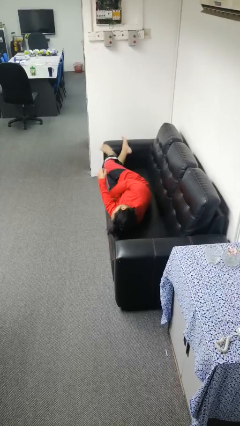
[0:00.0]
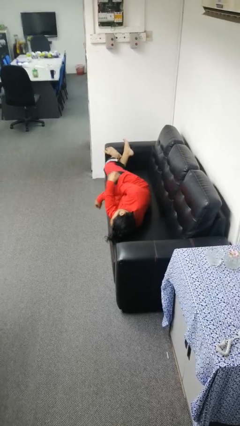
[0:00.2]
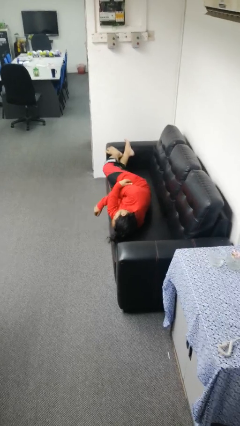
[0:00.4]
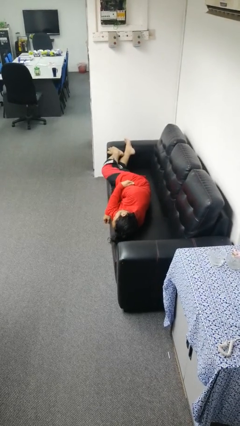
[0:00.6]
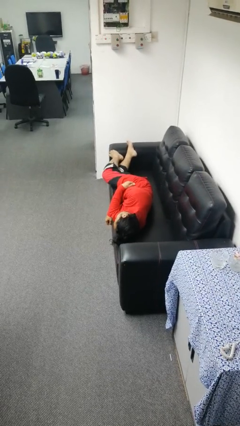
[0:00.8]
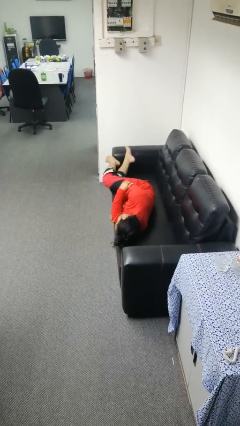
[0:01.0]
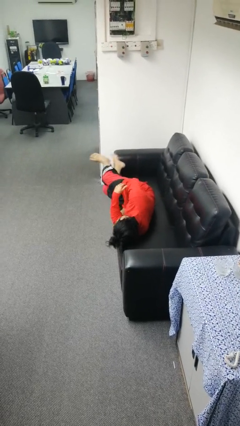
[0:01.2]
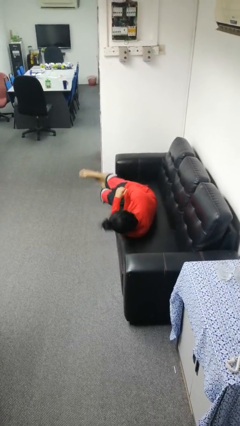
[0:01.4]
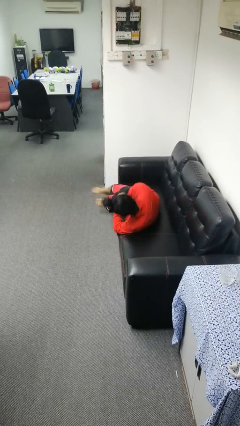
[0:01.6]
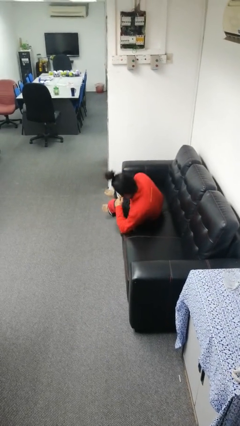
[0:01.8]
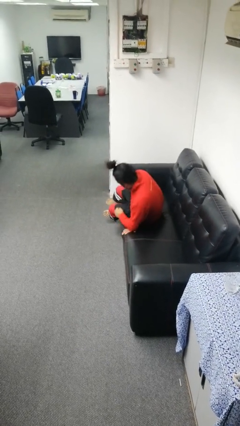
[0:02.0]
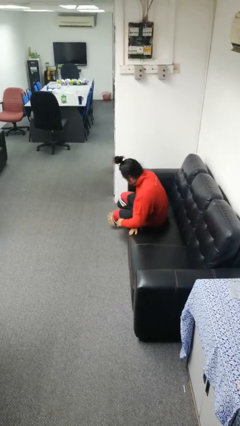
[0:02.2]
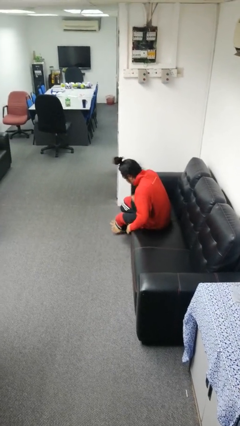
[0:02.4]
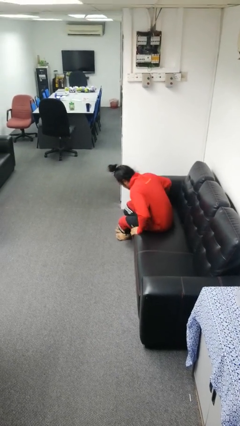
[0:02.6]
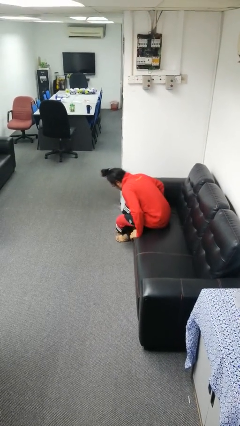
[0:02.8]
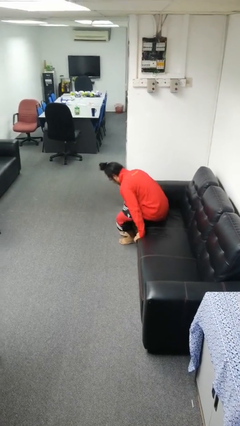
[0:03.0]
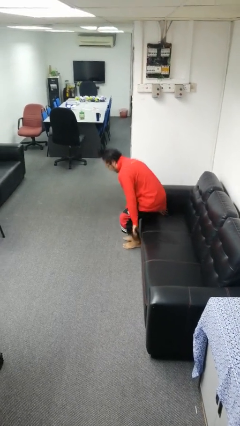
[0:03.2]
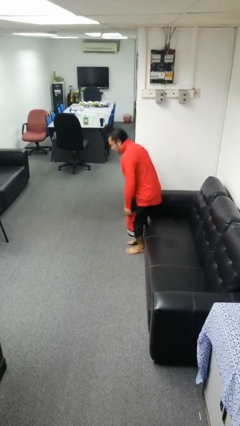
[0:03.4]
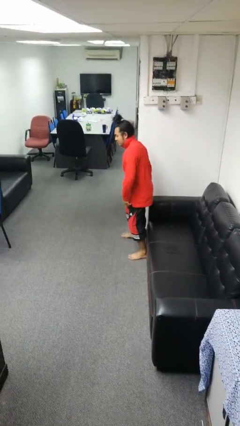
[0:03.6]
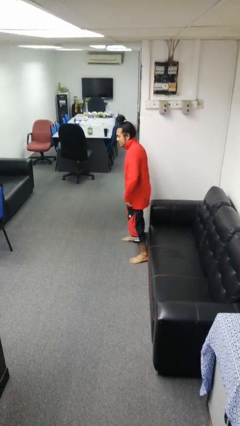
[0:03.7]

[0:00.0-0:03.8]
person stands up

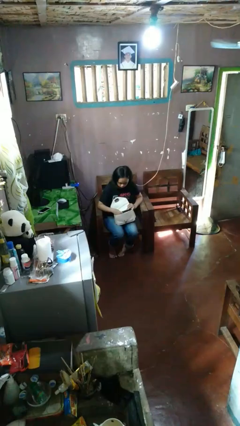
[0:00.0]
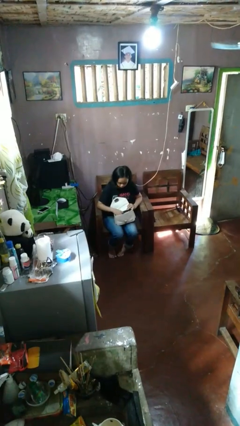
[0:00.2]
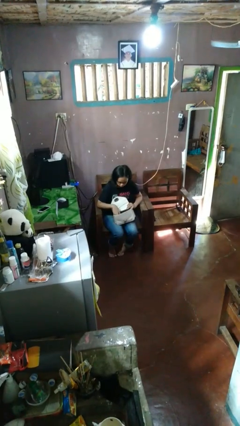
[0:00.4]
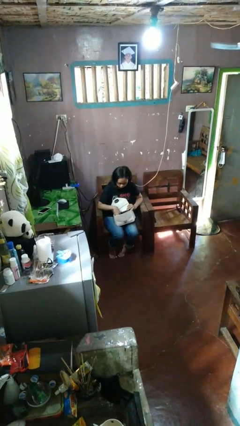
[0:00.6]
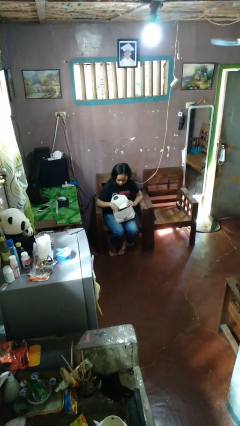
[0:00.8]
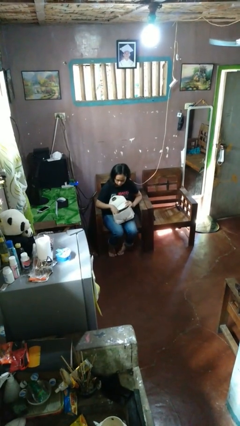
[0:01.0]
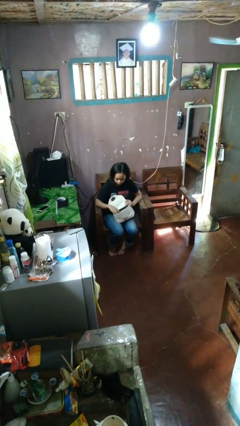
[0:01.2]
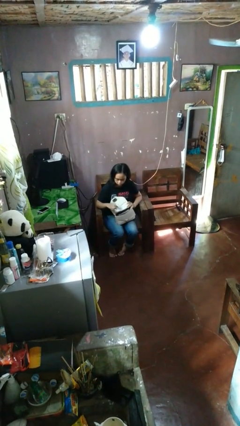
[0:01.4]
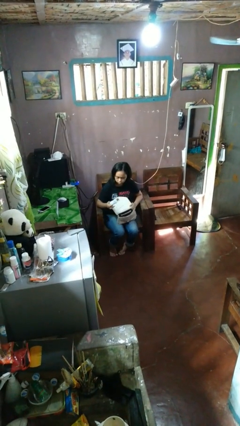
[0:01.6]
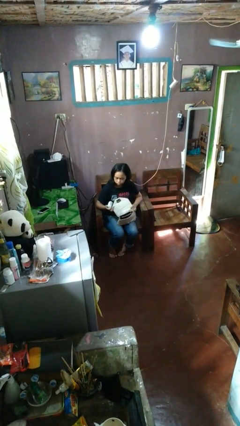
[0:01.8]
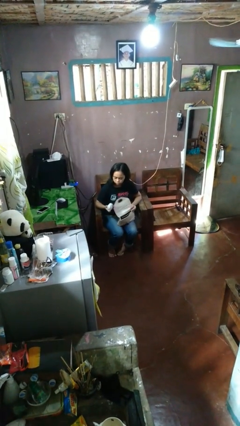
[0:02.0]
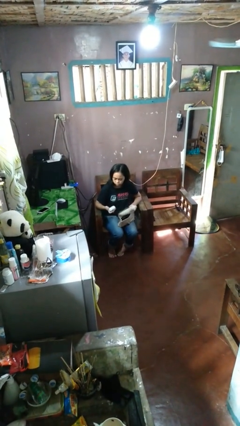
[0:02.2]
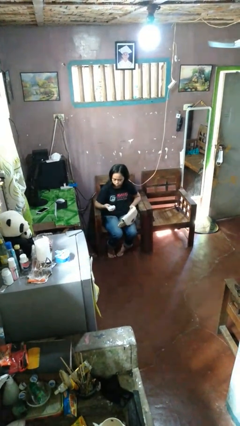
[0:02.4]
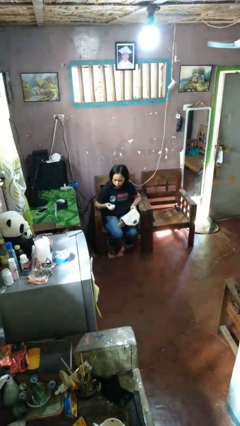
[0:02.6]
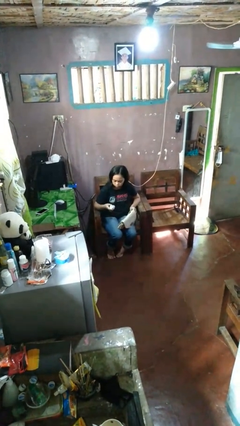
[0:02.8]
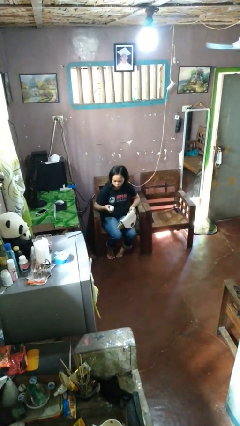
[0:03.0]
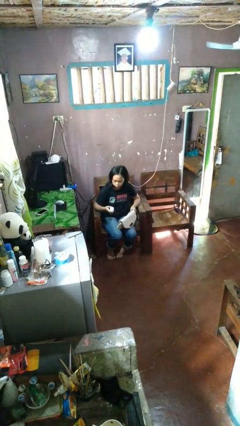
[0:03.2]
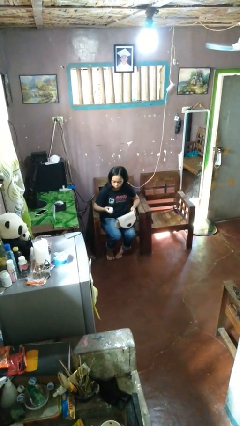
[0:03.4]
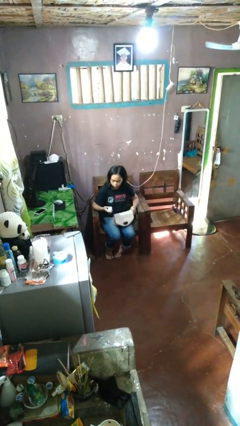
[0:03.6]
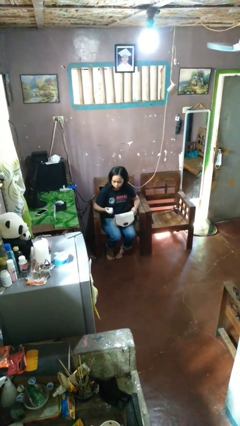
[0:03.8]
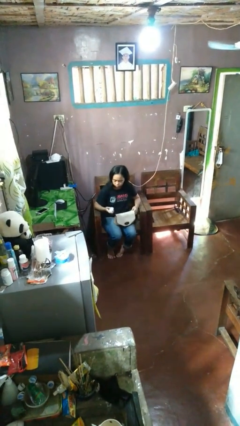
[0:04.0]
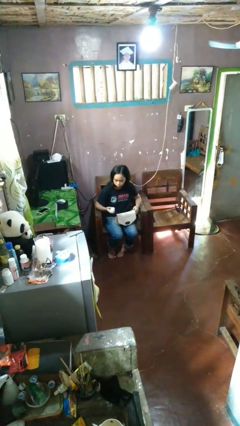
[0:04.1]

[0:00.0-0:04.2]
person takes object from purse

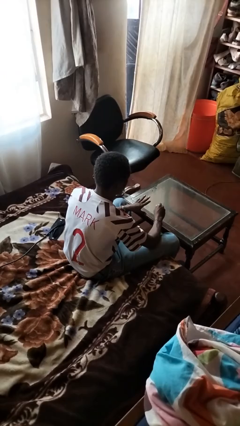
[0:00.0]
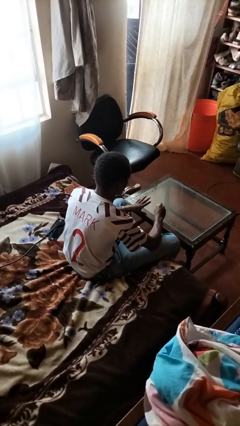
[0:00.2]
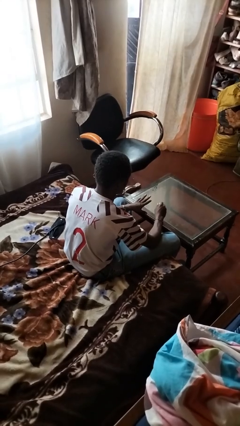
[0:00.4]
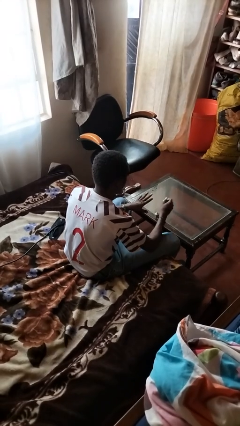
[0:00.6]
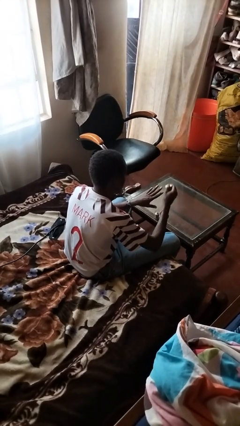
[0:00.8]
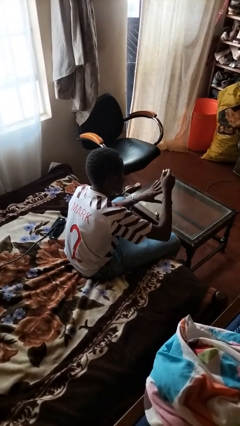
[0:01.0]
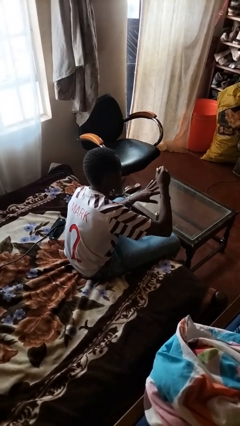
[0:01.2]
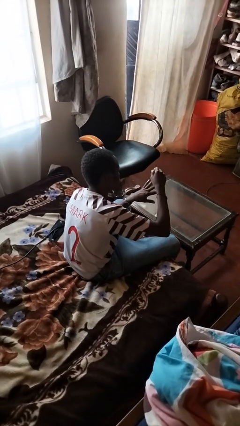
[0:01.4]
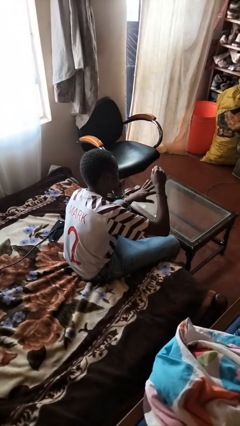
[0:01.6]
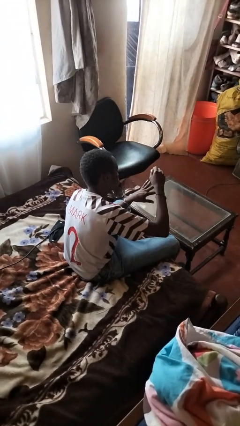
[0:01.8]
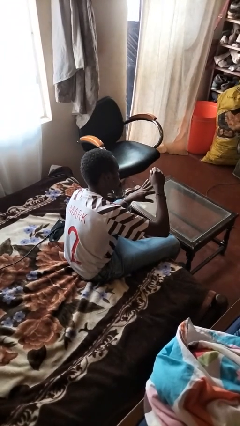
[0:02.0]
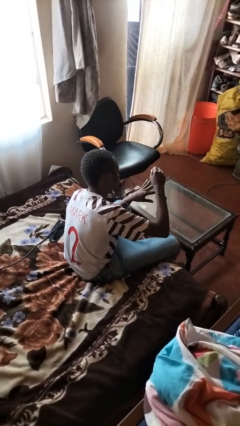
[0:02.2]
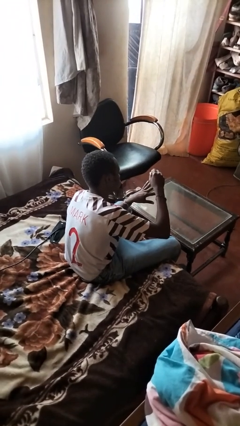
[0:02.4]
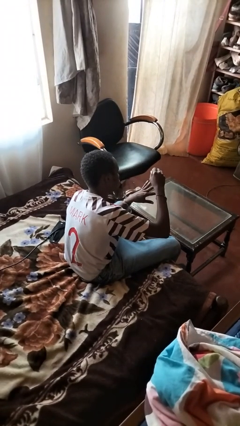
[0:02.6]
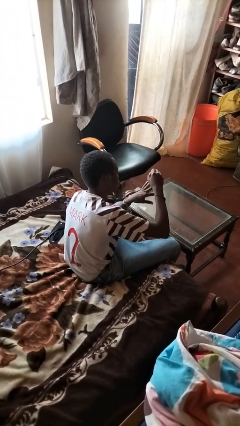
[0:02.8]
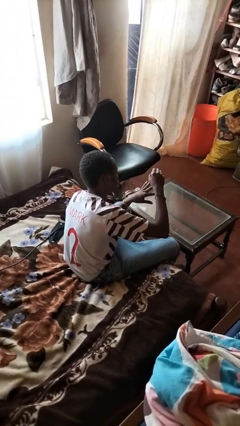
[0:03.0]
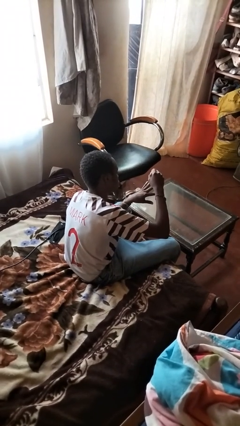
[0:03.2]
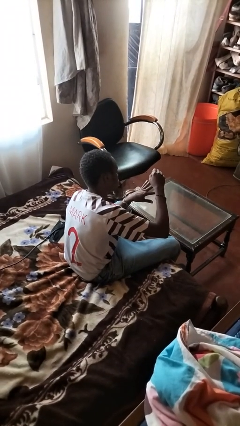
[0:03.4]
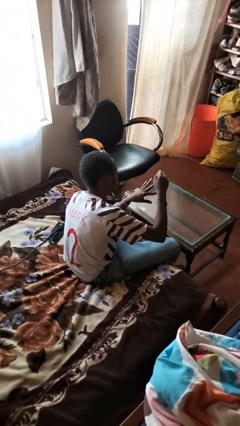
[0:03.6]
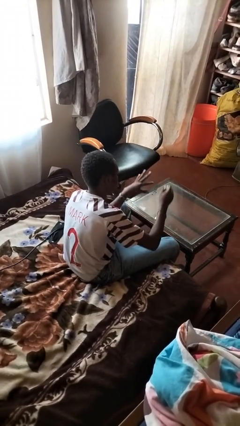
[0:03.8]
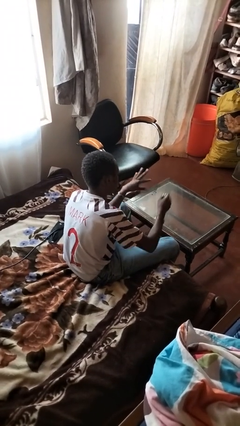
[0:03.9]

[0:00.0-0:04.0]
person paints fingernails

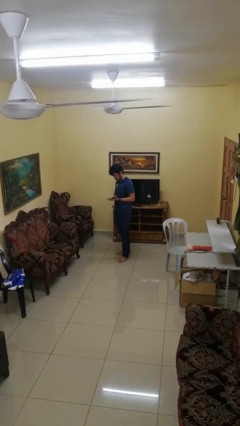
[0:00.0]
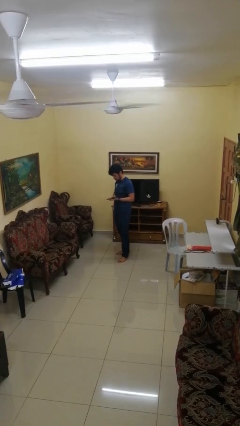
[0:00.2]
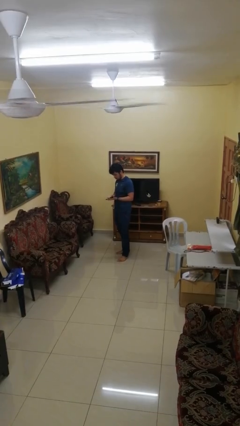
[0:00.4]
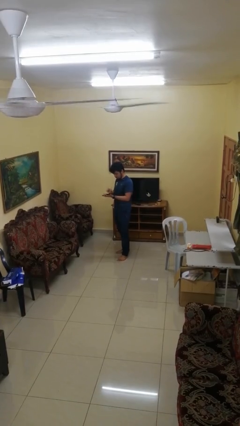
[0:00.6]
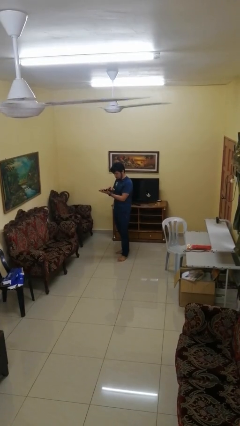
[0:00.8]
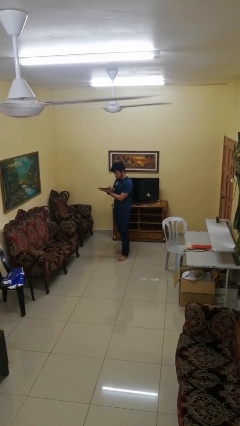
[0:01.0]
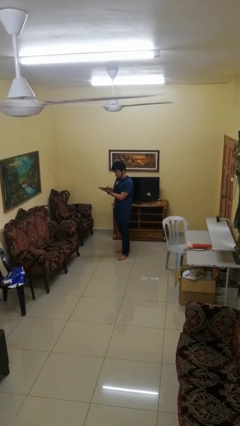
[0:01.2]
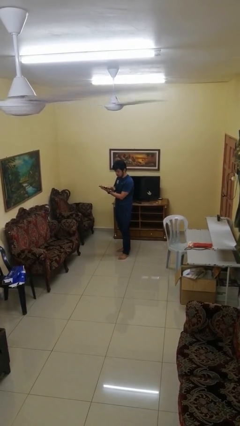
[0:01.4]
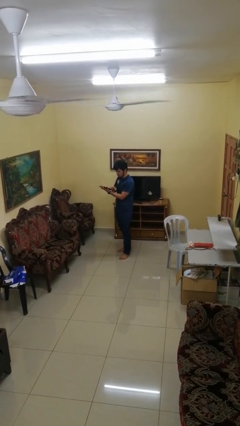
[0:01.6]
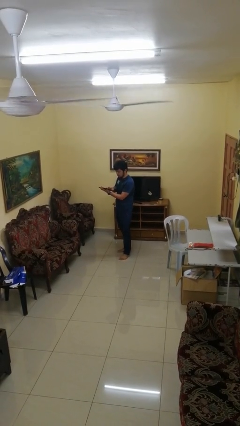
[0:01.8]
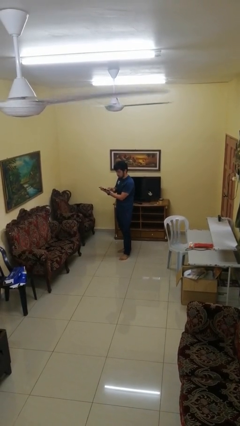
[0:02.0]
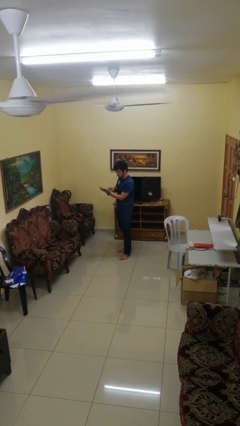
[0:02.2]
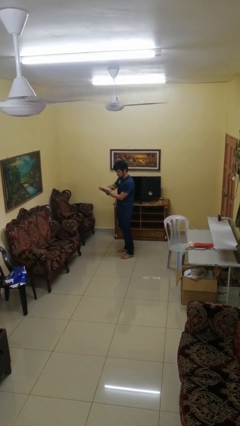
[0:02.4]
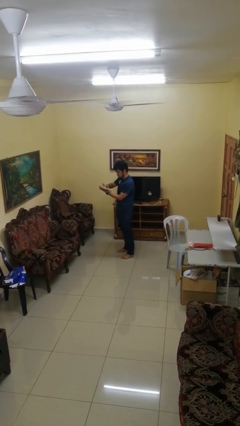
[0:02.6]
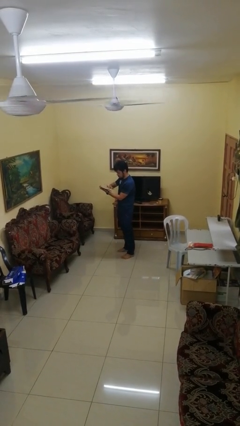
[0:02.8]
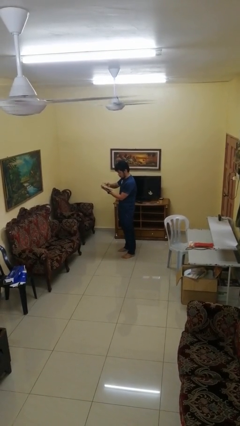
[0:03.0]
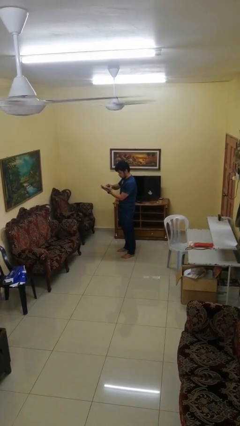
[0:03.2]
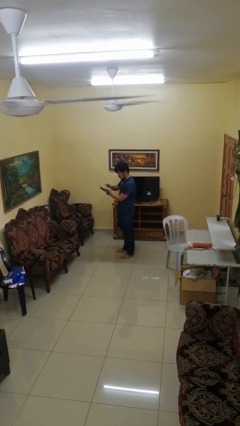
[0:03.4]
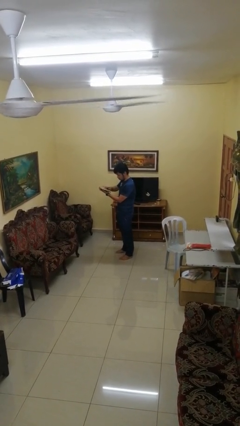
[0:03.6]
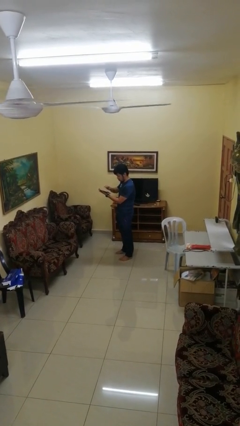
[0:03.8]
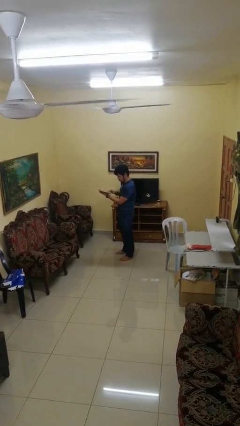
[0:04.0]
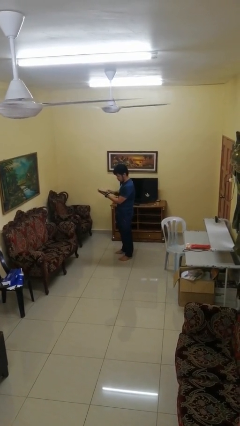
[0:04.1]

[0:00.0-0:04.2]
person interacts with tablet

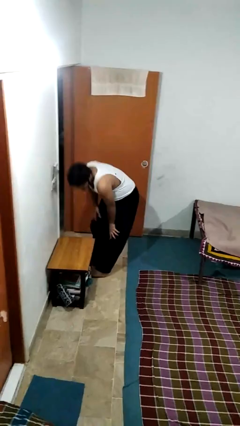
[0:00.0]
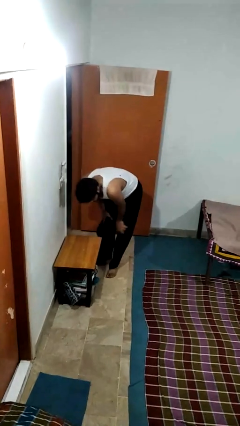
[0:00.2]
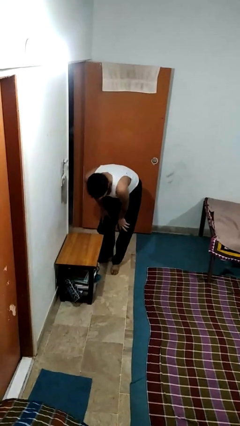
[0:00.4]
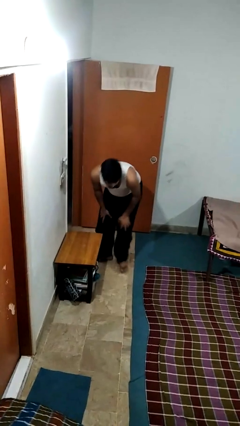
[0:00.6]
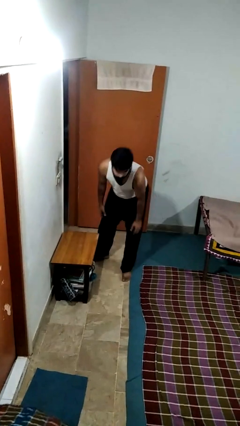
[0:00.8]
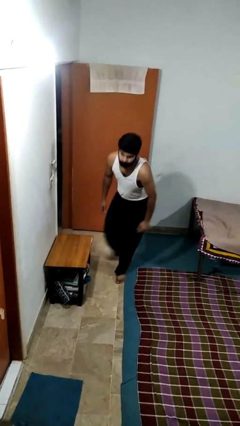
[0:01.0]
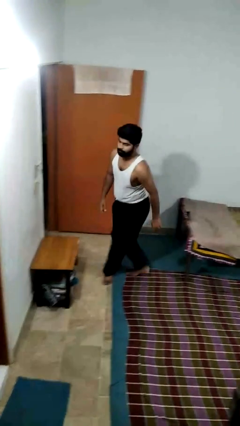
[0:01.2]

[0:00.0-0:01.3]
person bumps into table
